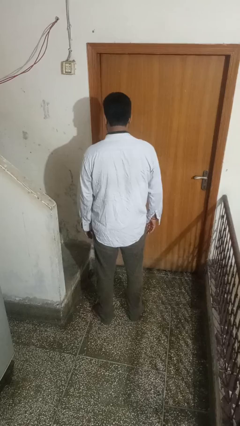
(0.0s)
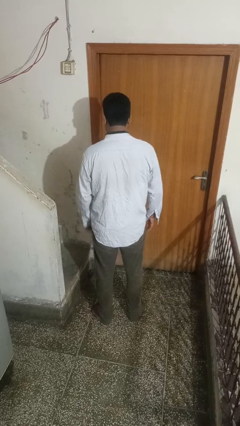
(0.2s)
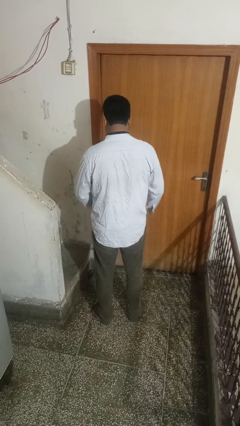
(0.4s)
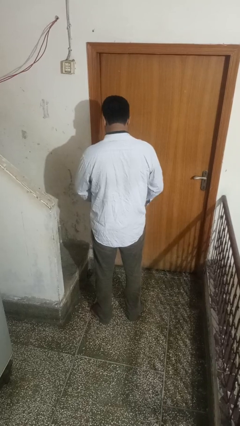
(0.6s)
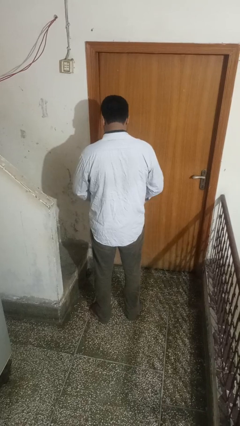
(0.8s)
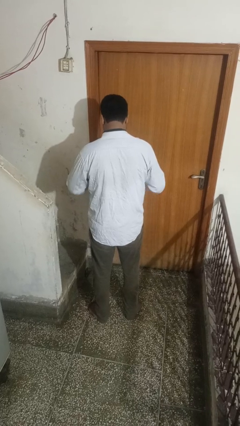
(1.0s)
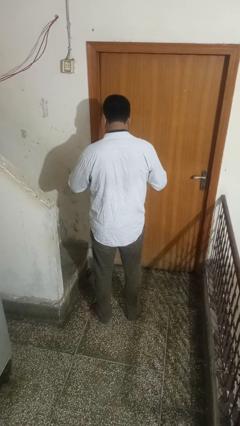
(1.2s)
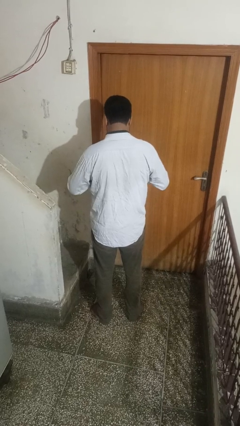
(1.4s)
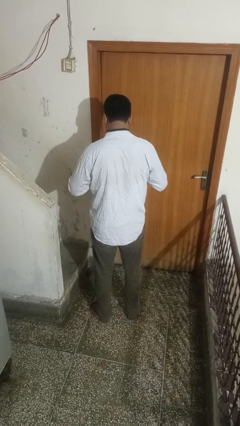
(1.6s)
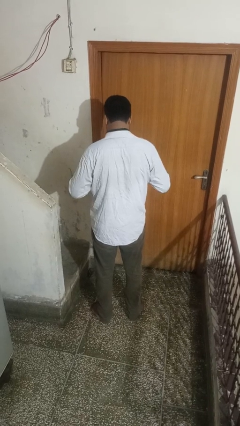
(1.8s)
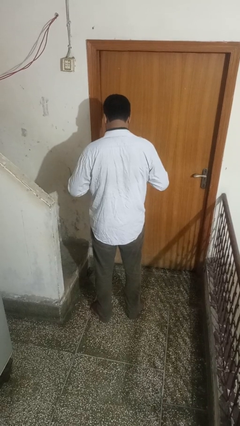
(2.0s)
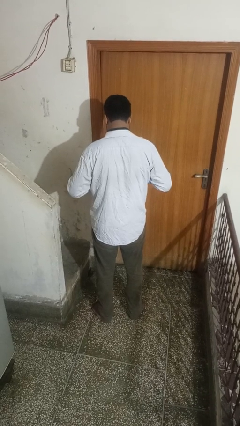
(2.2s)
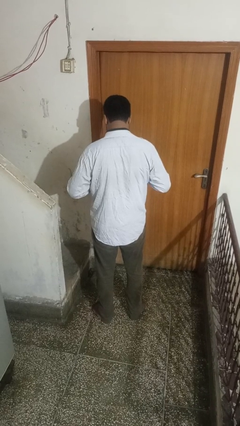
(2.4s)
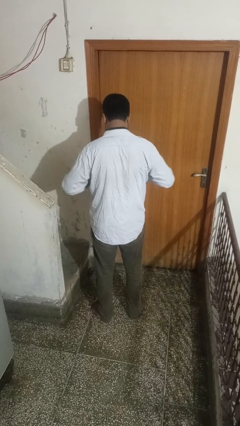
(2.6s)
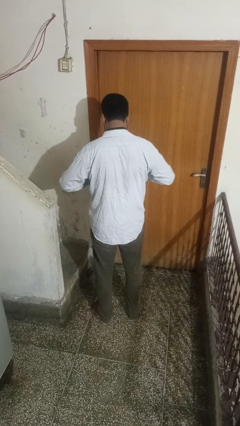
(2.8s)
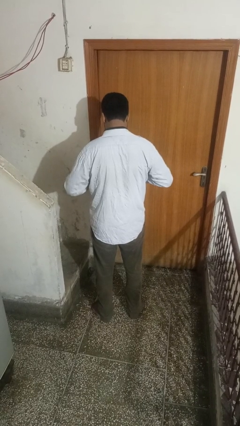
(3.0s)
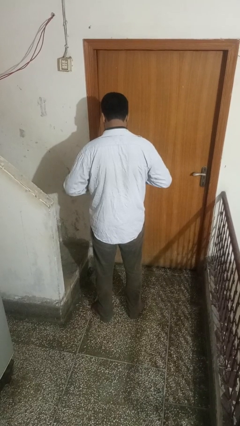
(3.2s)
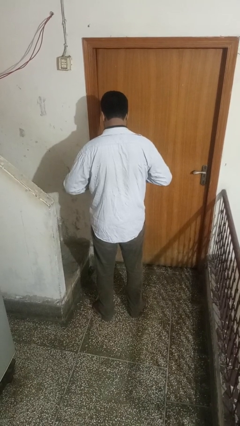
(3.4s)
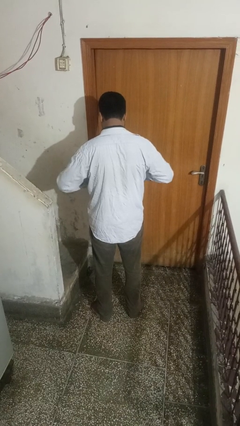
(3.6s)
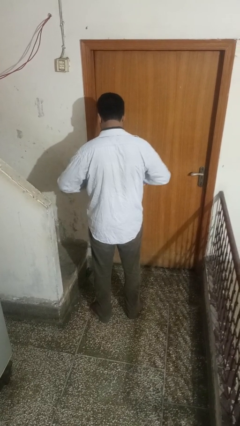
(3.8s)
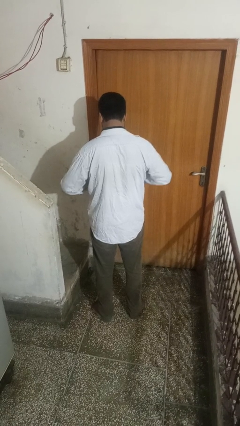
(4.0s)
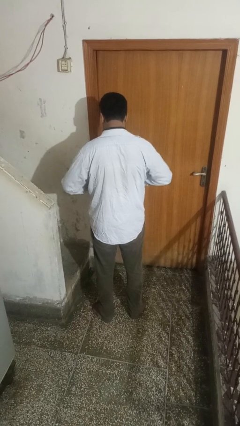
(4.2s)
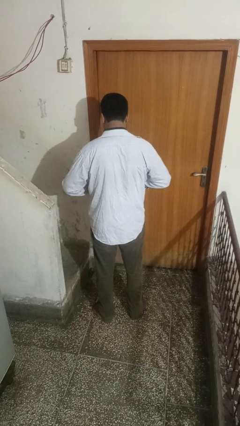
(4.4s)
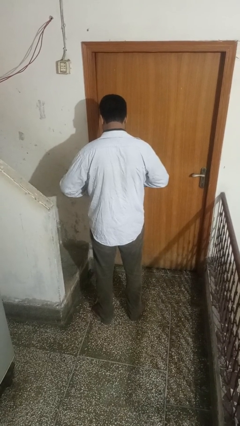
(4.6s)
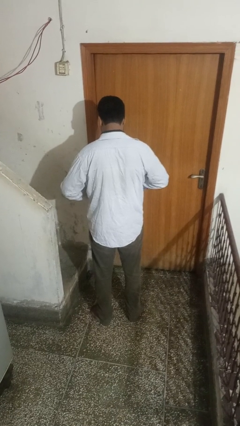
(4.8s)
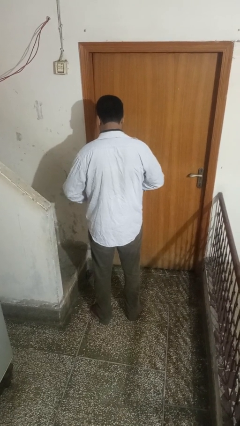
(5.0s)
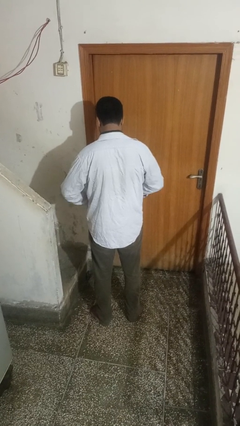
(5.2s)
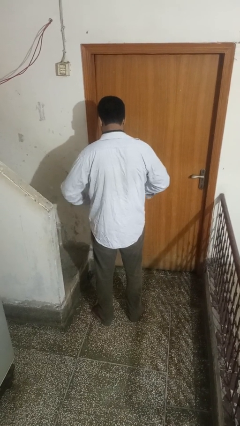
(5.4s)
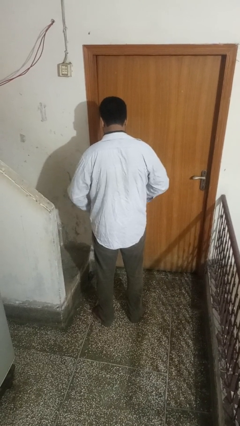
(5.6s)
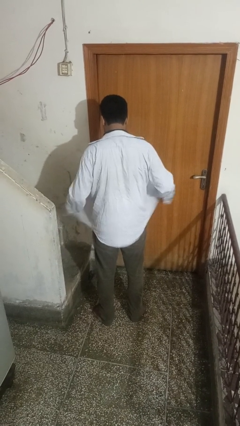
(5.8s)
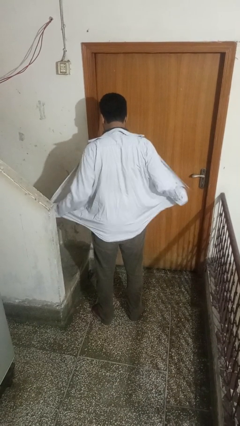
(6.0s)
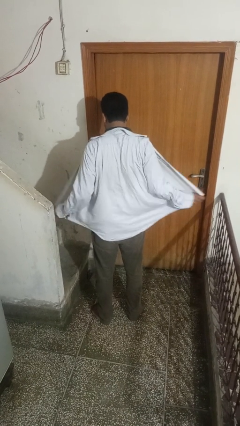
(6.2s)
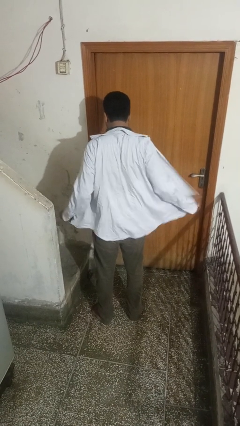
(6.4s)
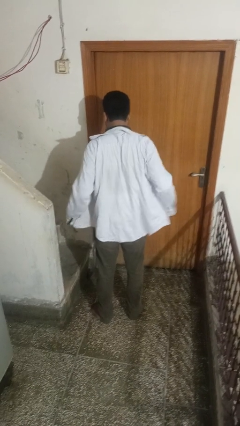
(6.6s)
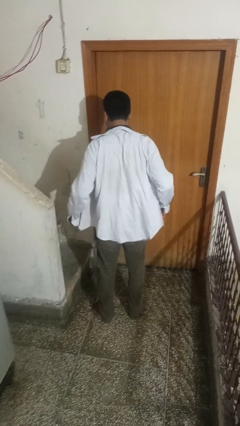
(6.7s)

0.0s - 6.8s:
person unbuttons shirt

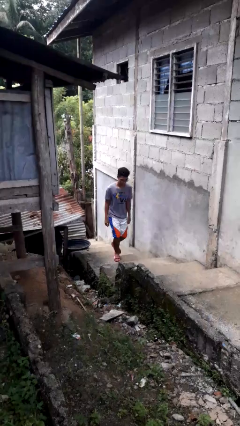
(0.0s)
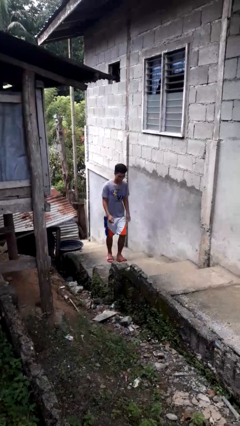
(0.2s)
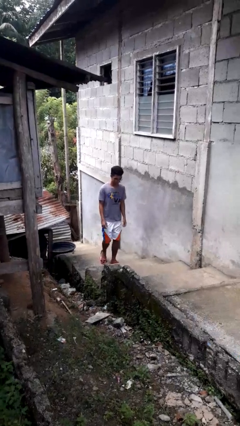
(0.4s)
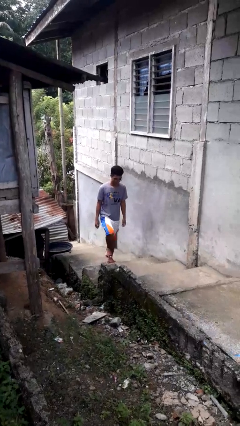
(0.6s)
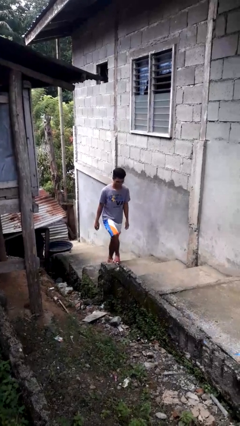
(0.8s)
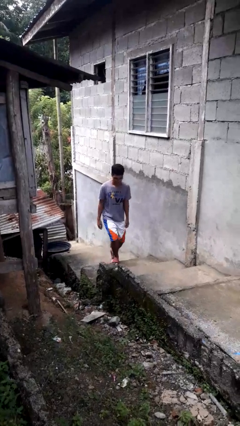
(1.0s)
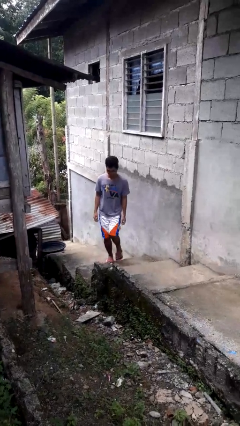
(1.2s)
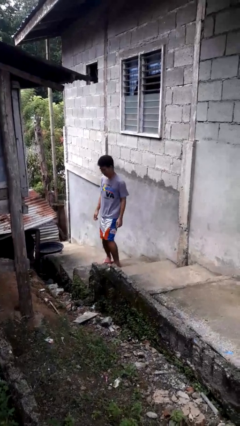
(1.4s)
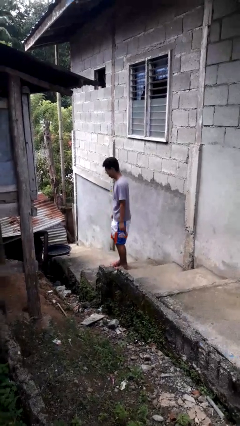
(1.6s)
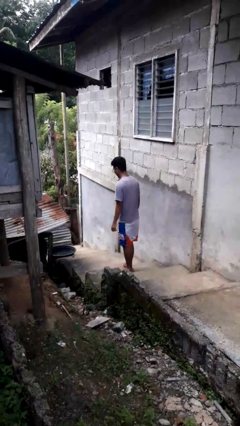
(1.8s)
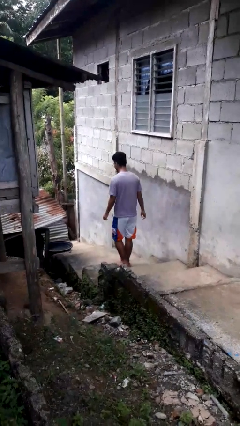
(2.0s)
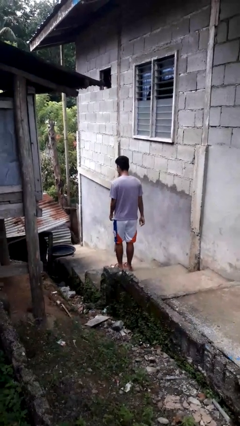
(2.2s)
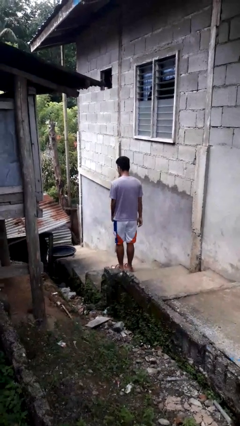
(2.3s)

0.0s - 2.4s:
person climbs up stairs

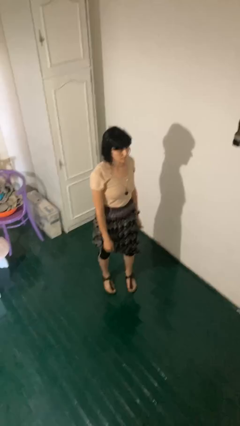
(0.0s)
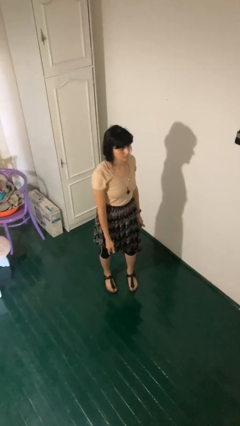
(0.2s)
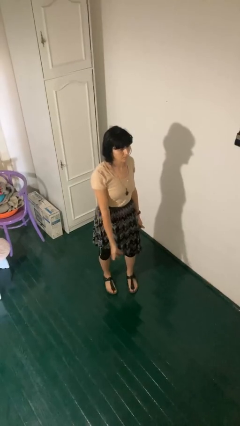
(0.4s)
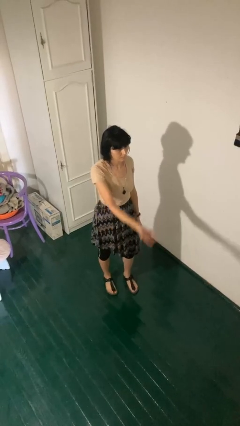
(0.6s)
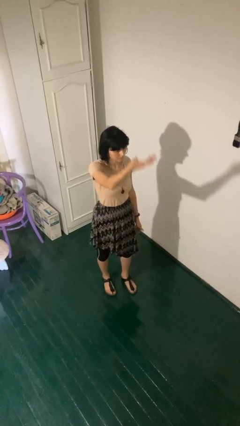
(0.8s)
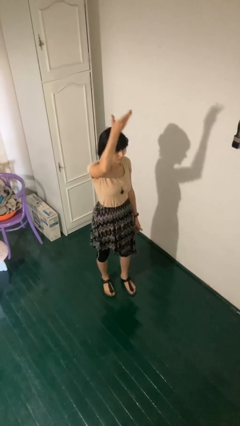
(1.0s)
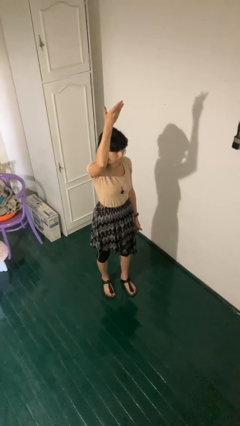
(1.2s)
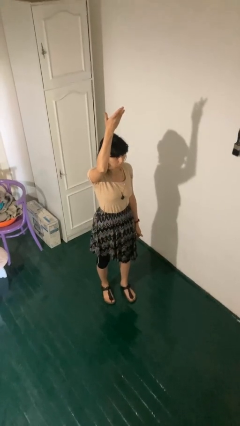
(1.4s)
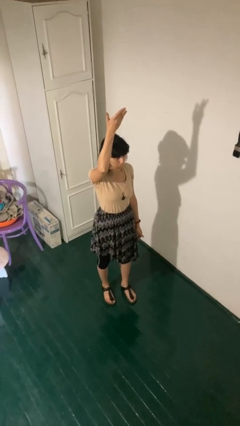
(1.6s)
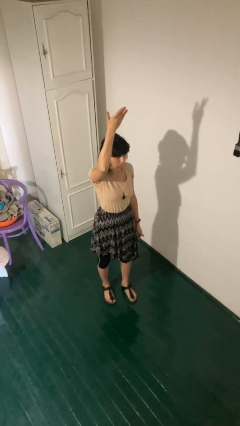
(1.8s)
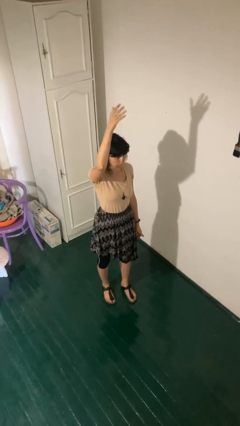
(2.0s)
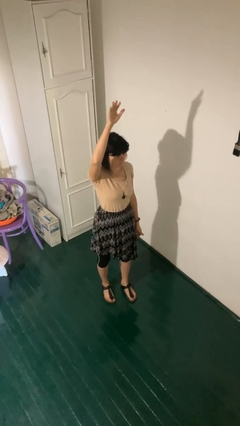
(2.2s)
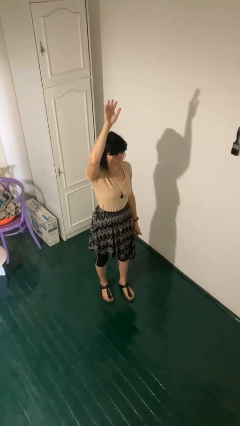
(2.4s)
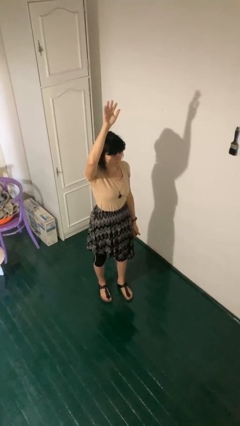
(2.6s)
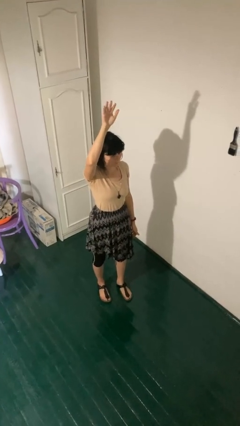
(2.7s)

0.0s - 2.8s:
person gestures swipe up

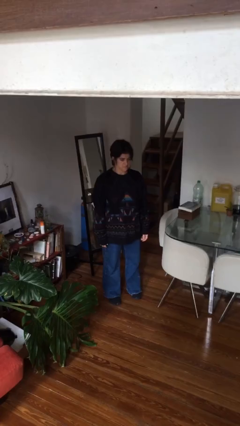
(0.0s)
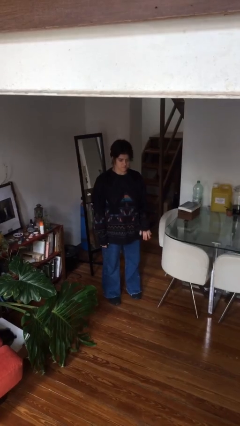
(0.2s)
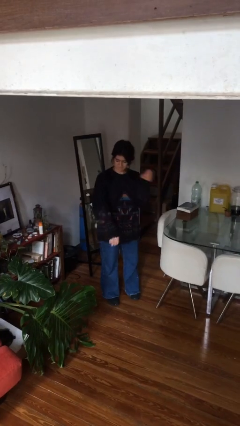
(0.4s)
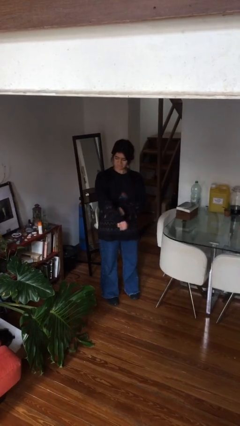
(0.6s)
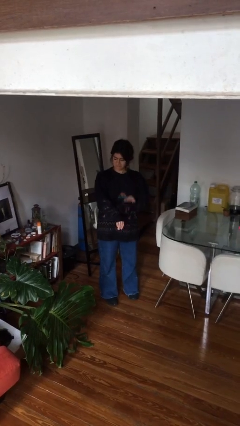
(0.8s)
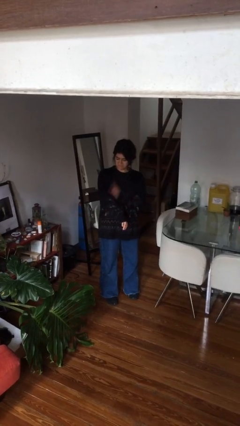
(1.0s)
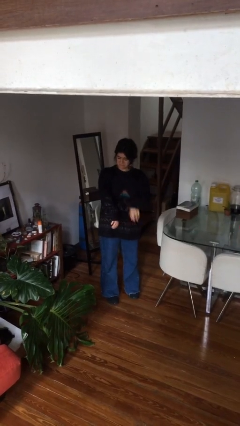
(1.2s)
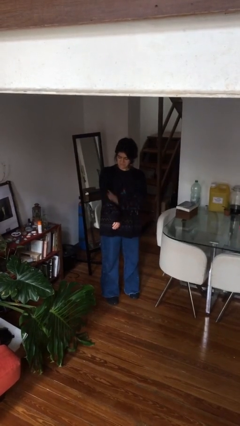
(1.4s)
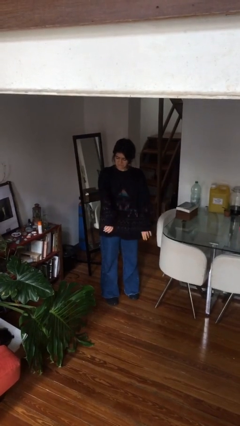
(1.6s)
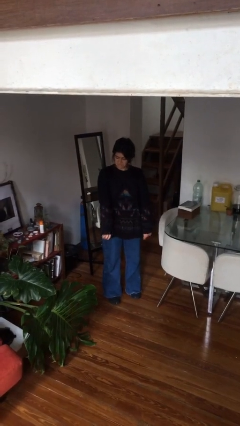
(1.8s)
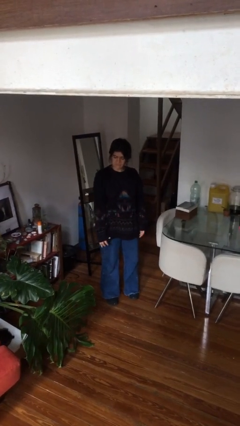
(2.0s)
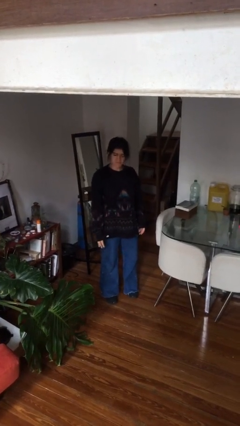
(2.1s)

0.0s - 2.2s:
person swats bug

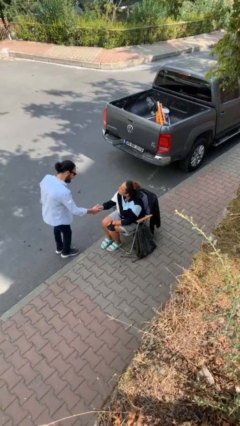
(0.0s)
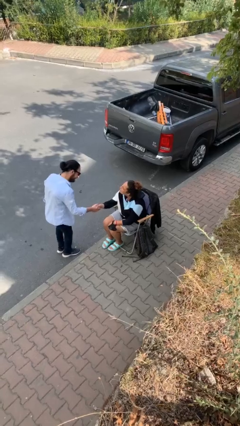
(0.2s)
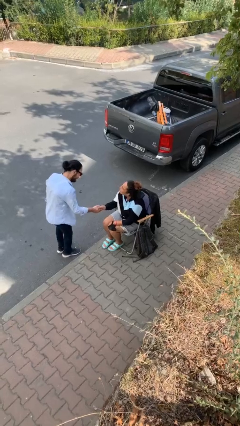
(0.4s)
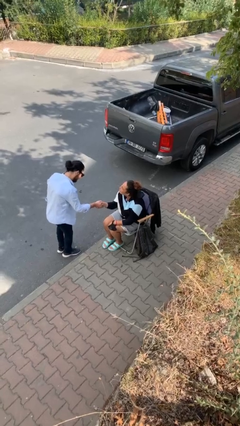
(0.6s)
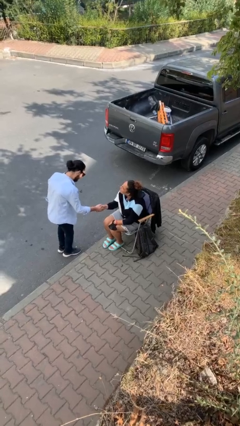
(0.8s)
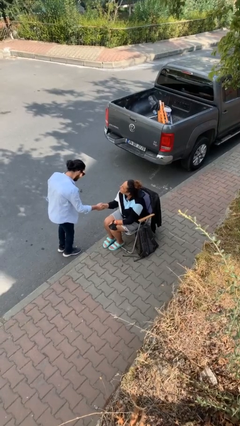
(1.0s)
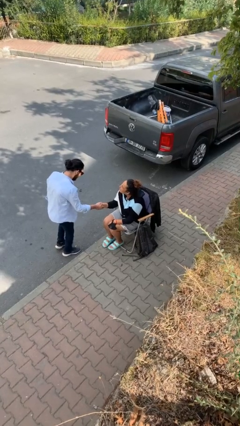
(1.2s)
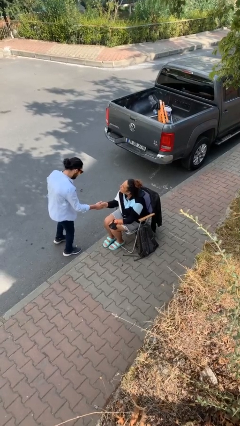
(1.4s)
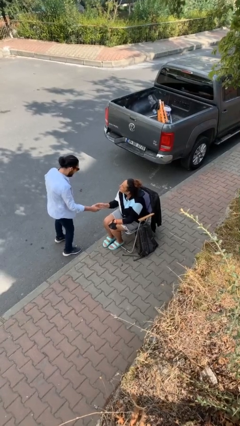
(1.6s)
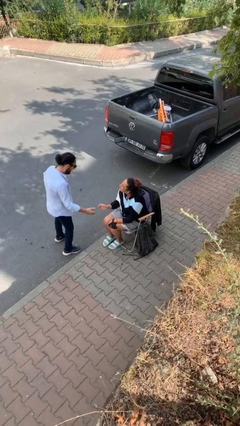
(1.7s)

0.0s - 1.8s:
person shakes hand

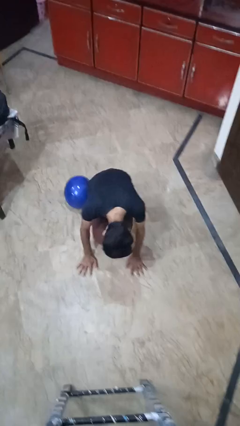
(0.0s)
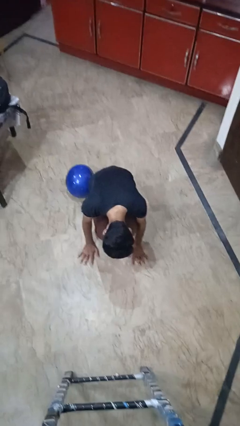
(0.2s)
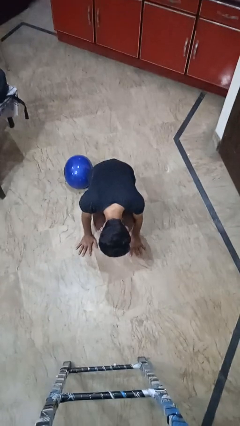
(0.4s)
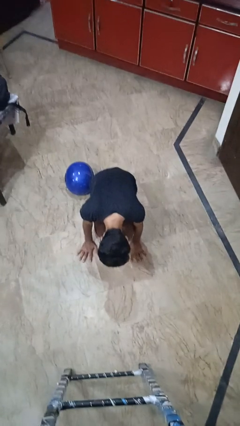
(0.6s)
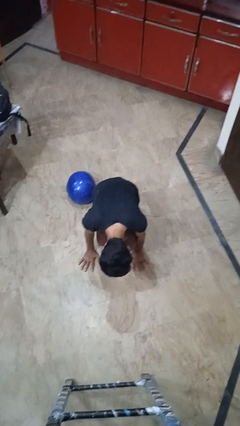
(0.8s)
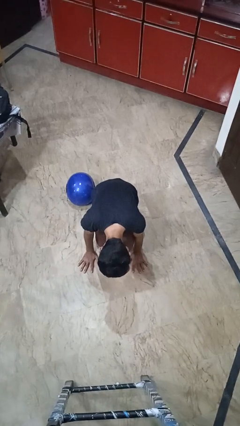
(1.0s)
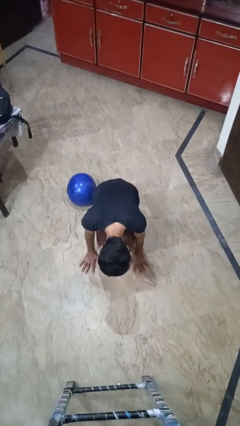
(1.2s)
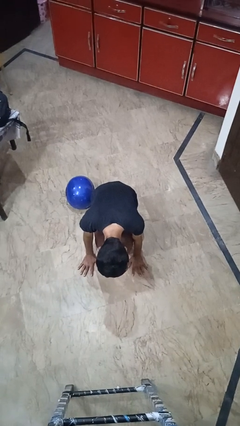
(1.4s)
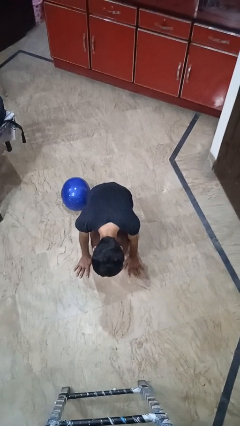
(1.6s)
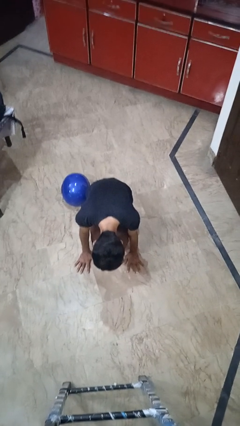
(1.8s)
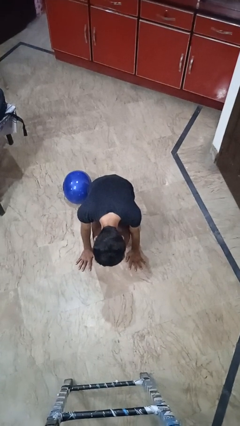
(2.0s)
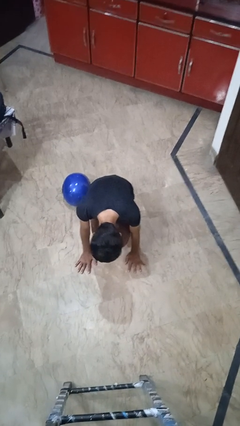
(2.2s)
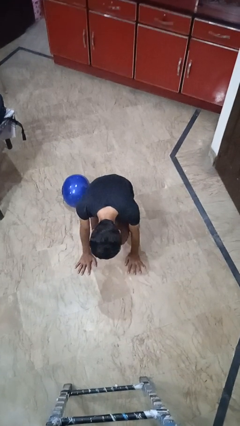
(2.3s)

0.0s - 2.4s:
person puts phone into pocket
